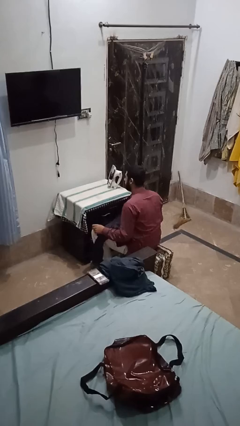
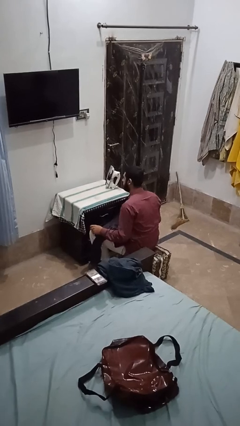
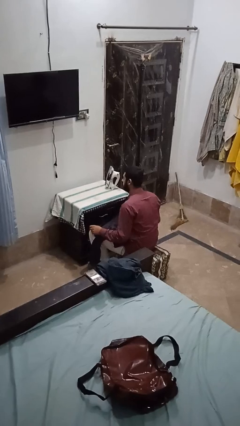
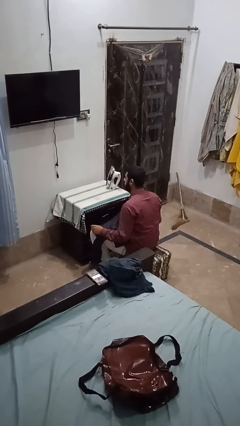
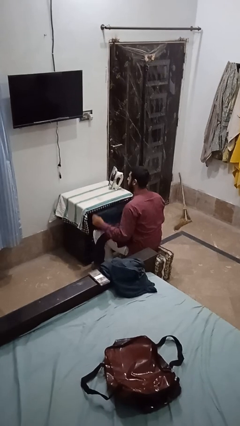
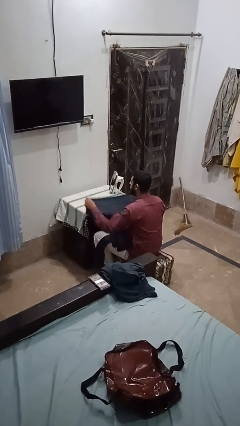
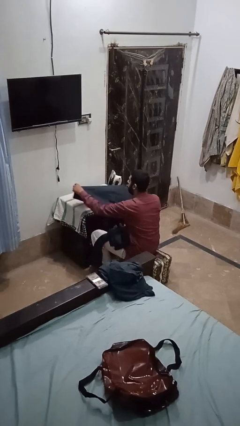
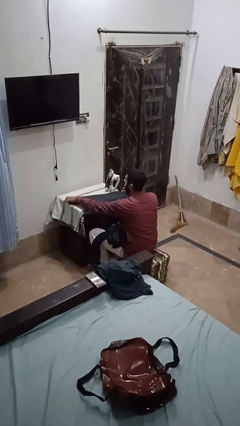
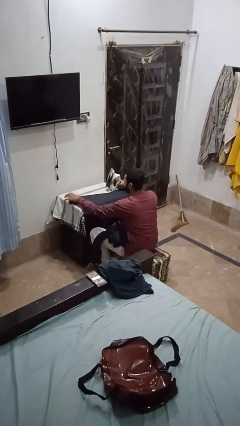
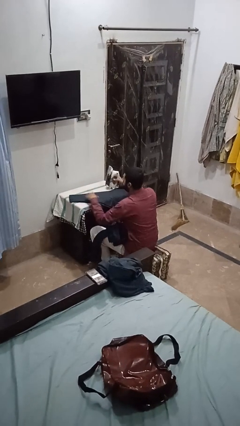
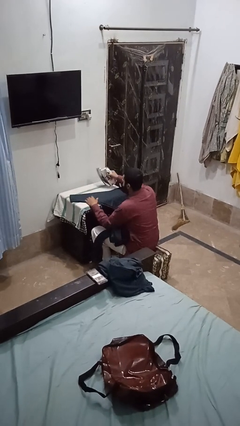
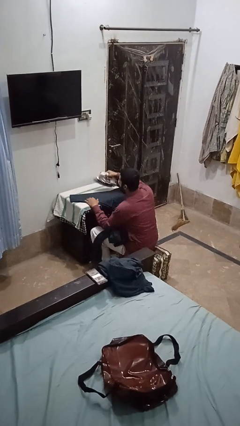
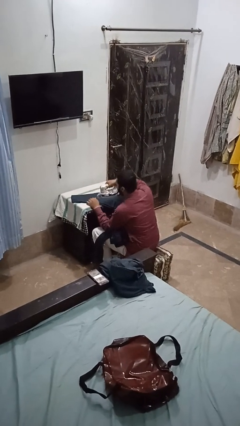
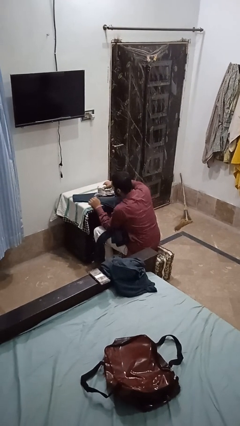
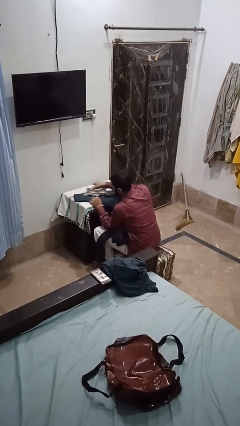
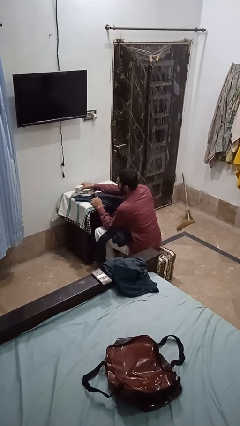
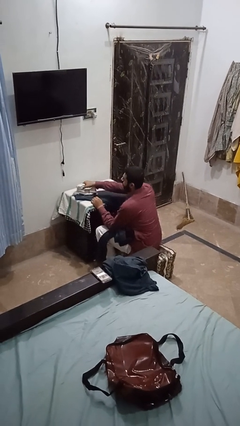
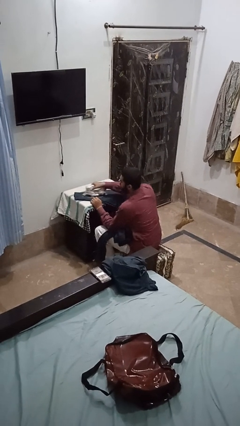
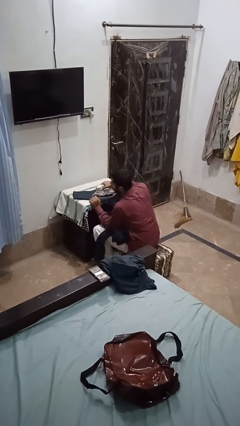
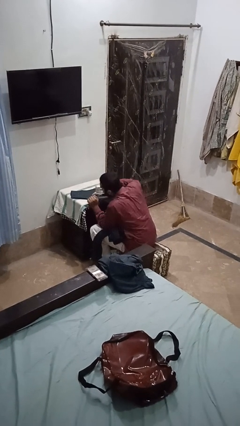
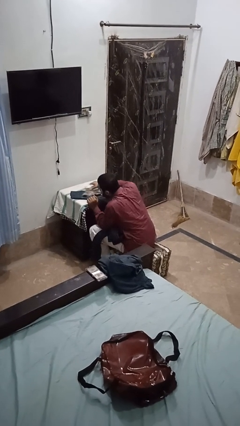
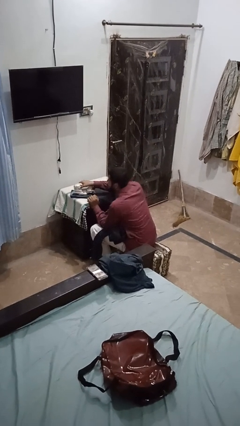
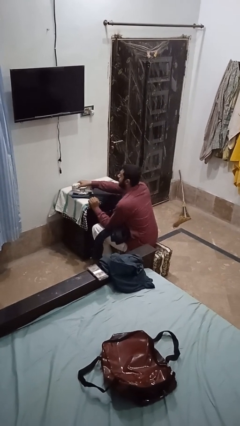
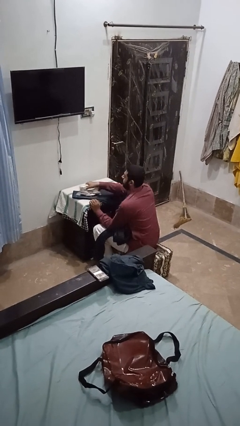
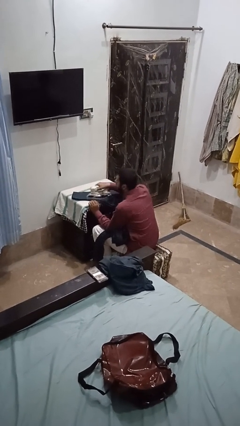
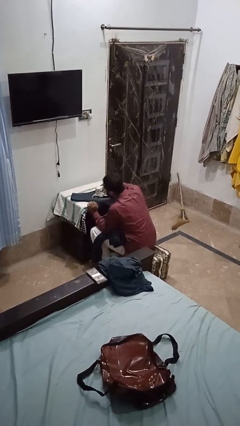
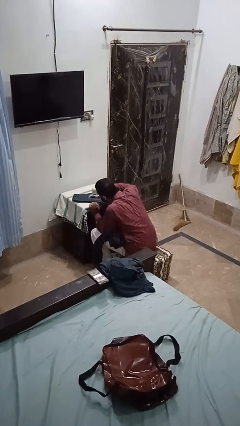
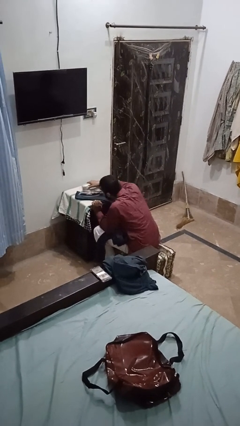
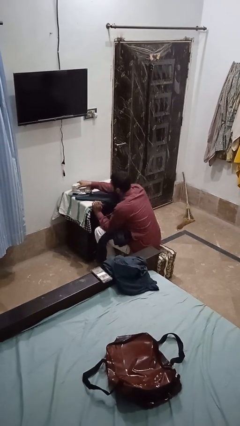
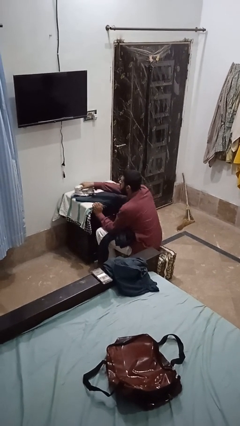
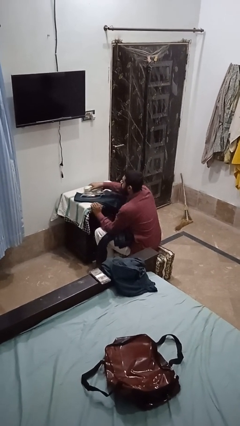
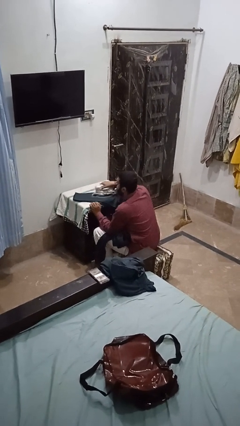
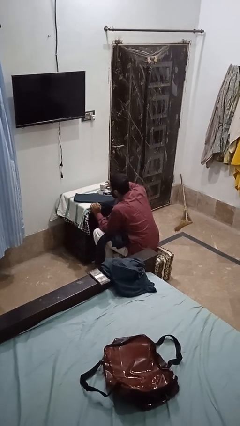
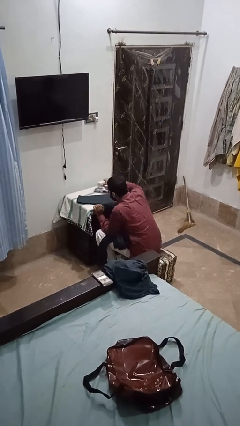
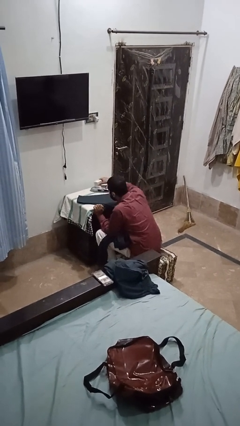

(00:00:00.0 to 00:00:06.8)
person irons clothes

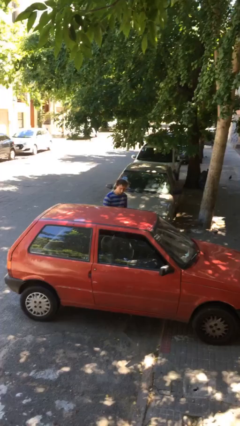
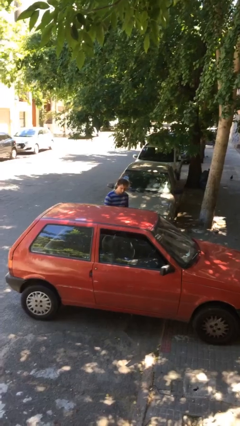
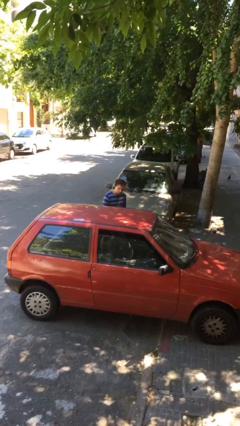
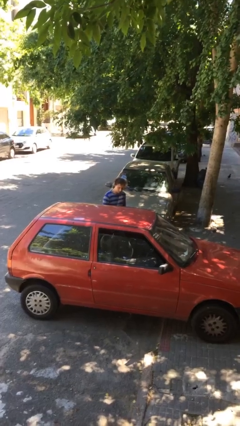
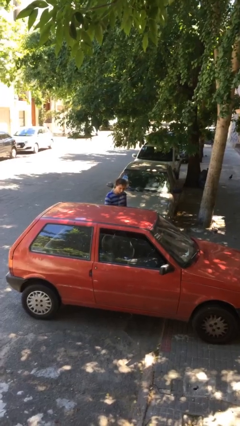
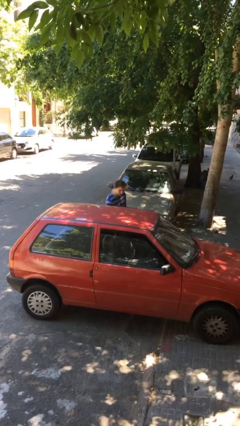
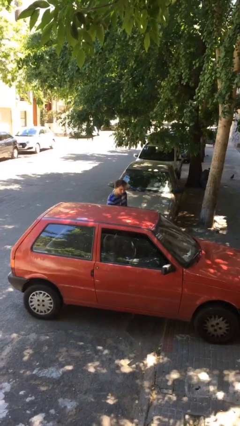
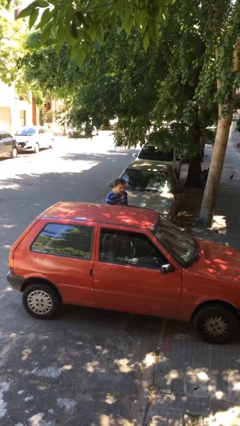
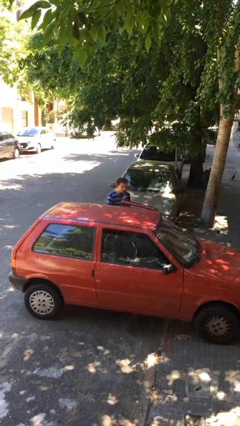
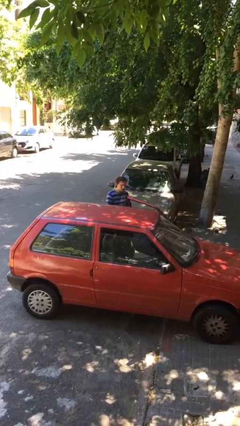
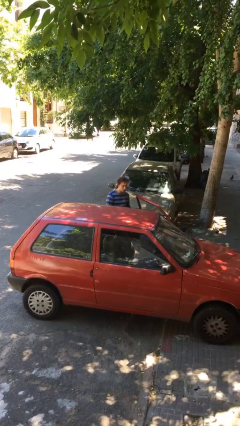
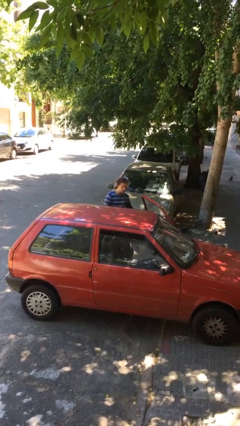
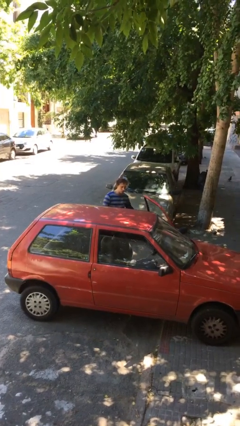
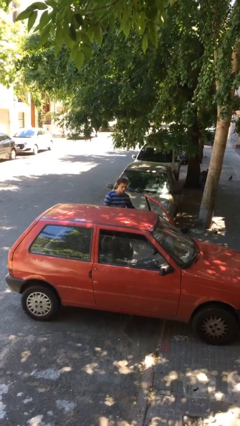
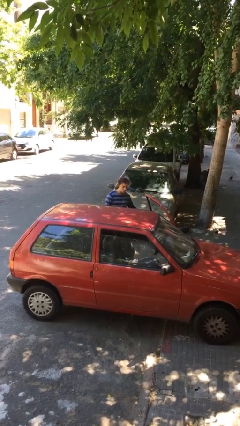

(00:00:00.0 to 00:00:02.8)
person opens car door

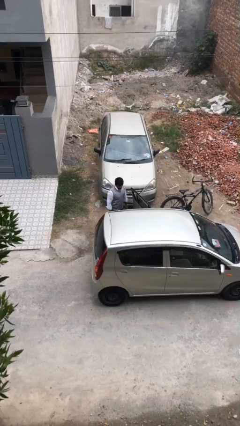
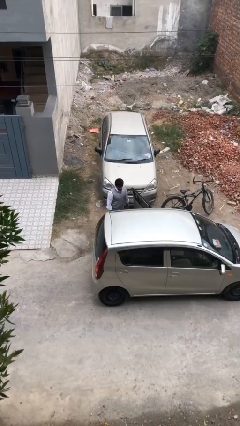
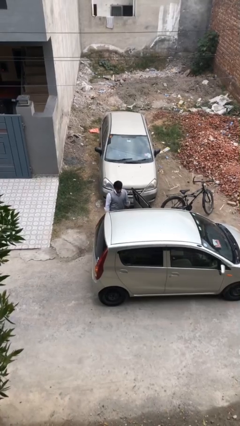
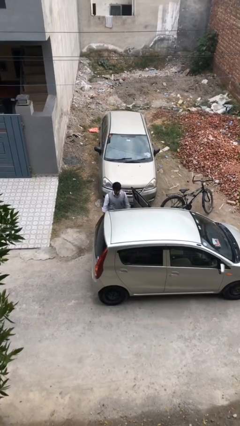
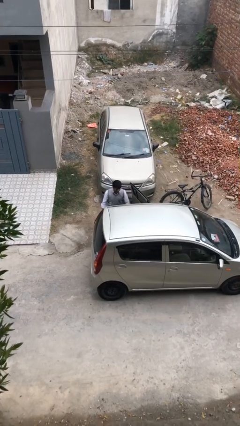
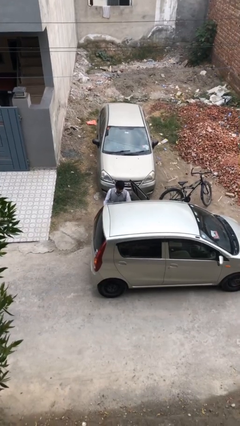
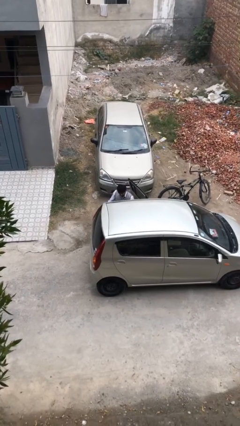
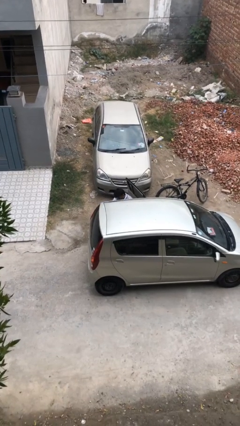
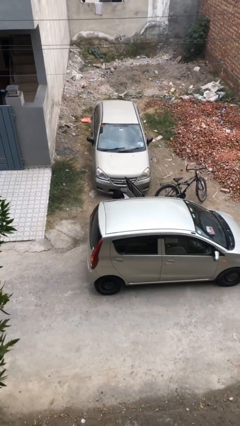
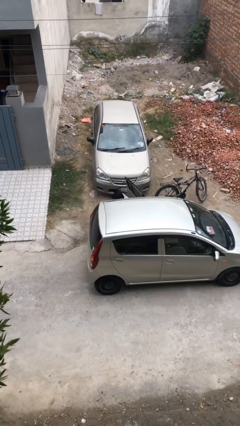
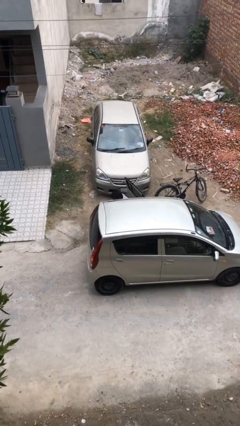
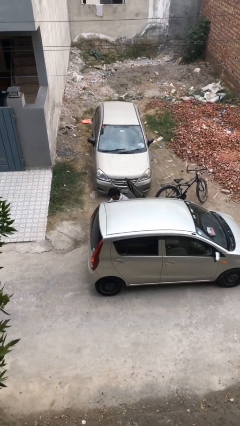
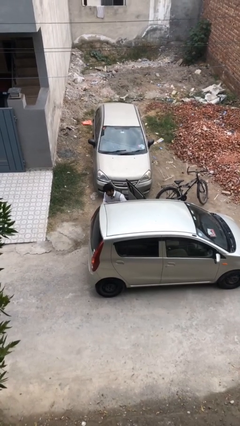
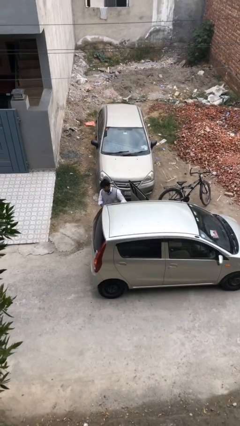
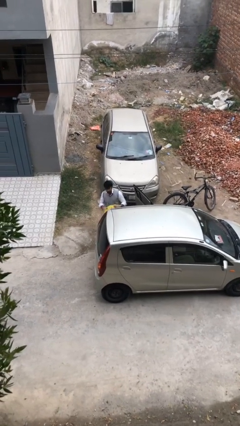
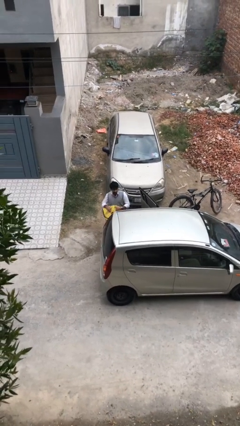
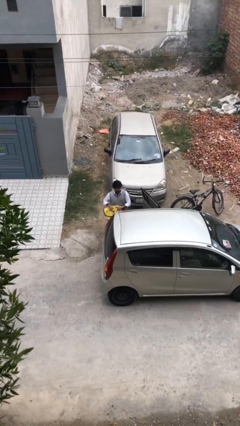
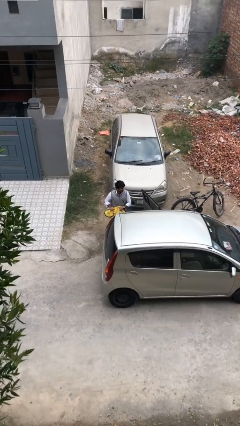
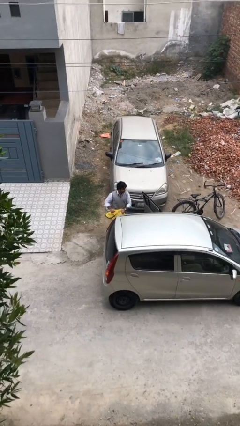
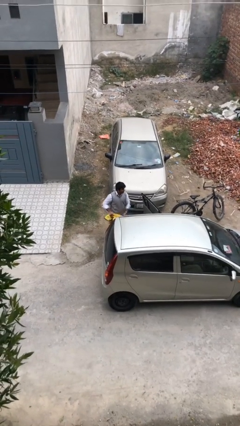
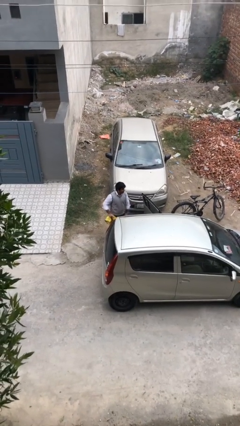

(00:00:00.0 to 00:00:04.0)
person unloads car

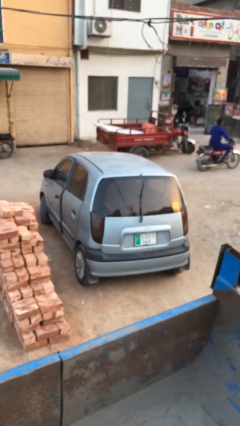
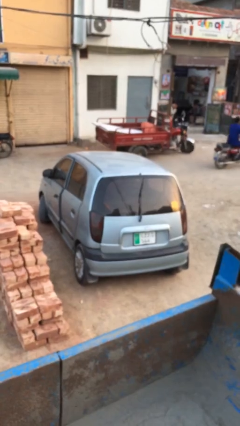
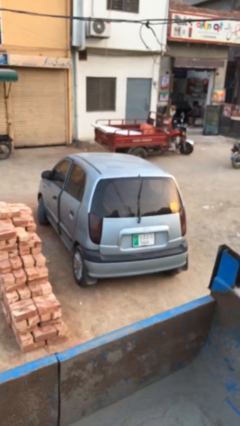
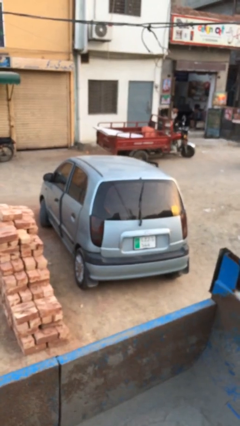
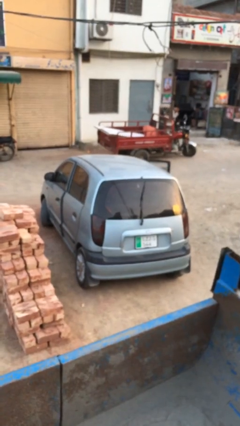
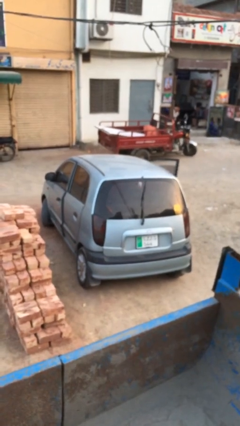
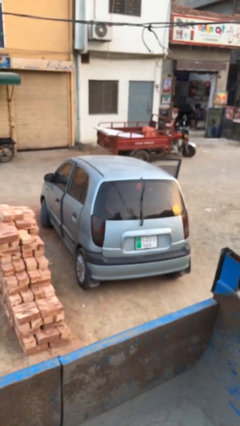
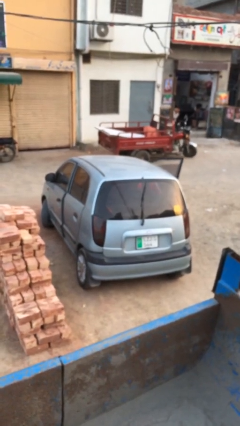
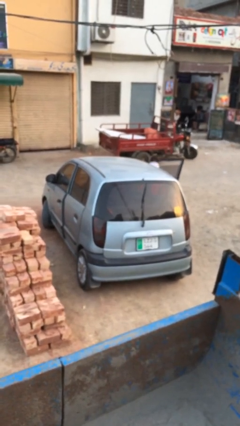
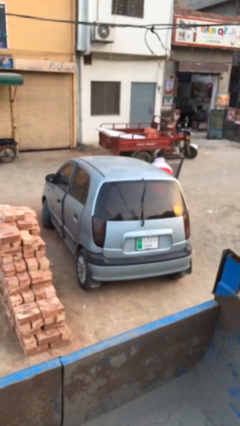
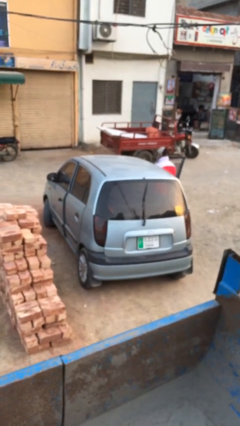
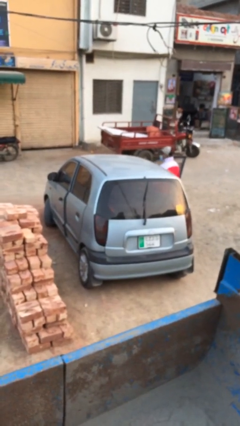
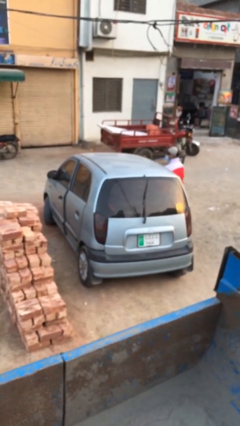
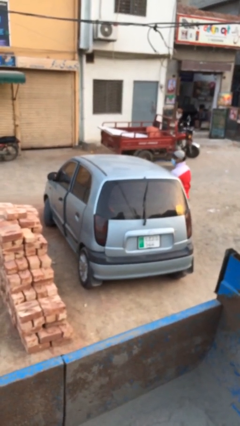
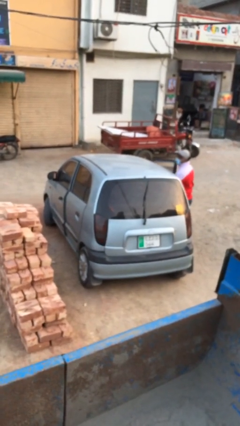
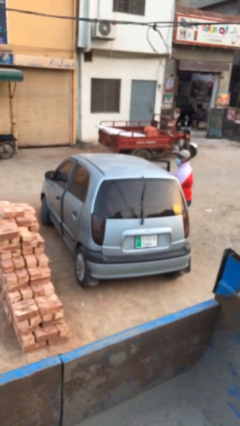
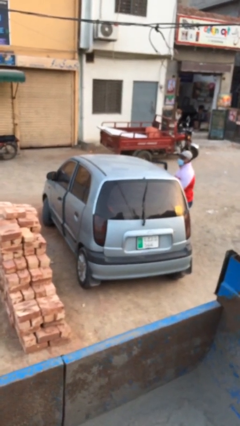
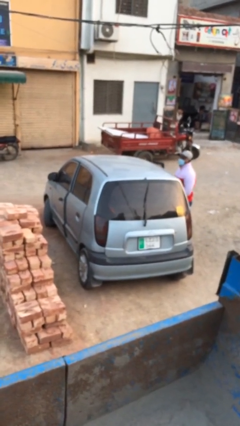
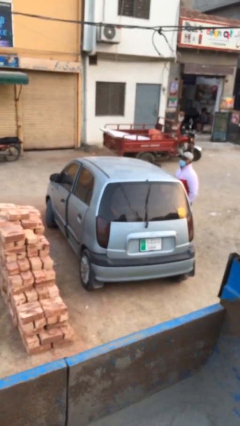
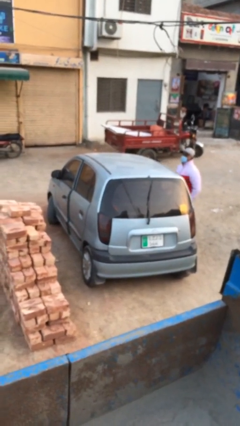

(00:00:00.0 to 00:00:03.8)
car drops off person

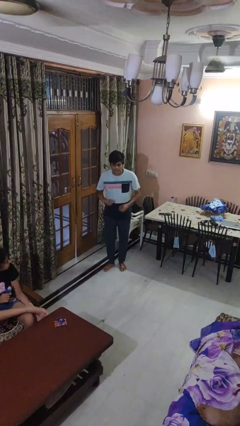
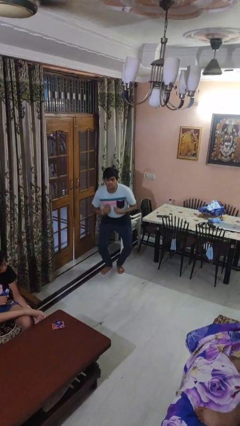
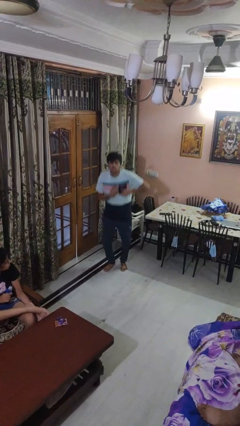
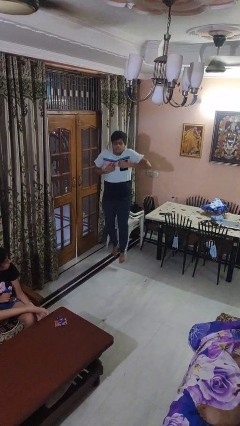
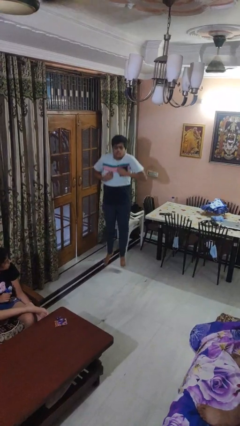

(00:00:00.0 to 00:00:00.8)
person jumps
